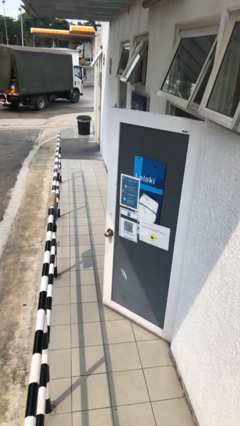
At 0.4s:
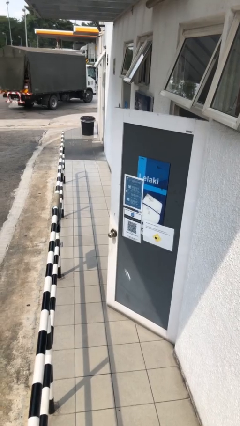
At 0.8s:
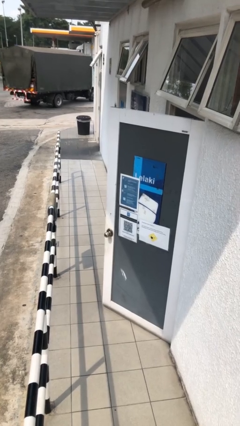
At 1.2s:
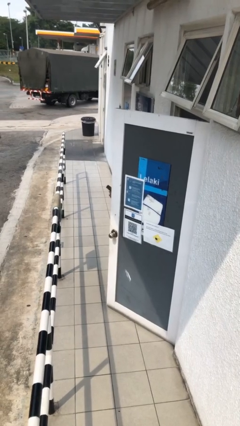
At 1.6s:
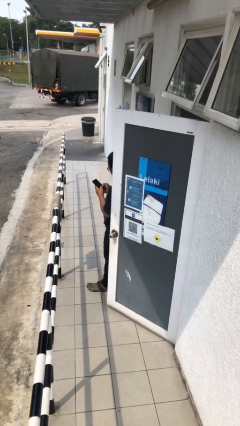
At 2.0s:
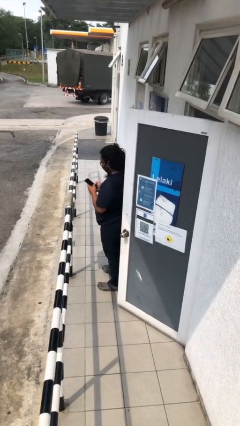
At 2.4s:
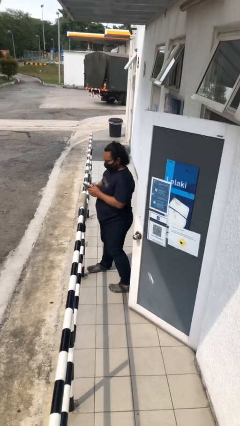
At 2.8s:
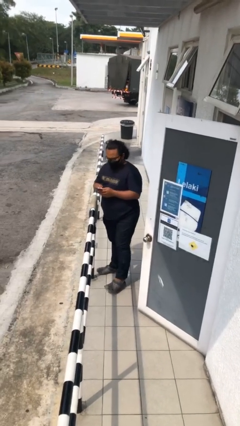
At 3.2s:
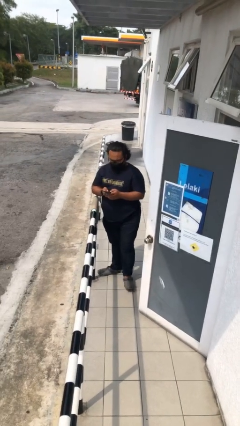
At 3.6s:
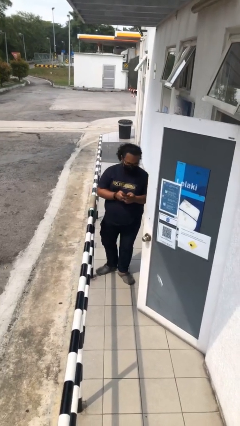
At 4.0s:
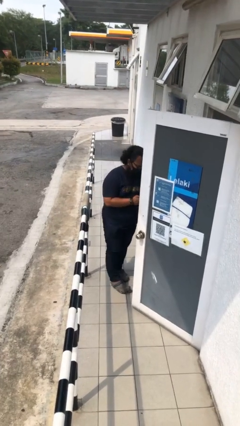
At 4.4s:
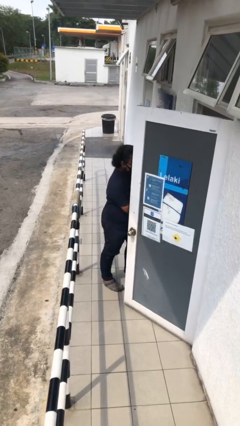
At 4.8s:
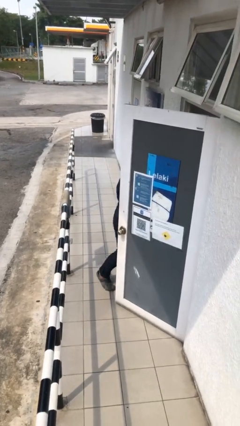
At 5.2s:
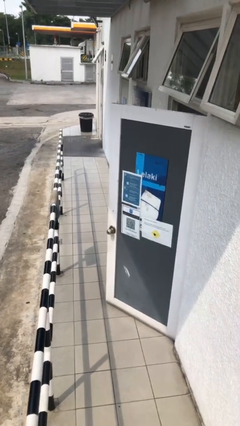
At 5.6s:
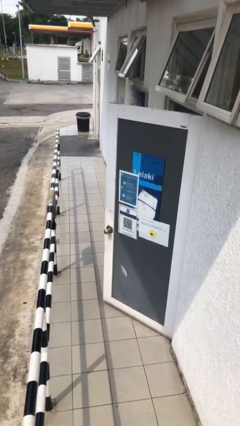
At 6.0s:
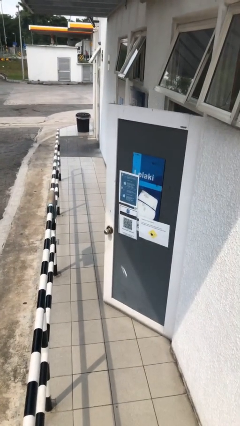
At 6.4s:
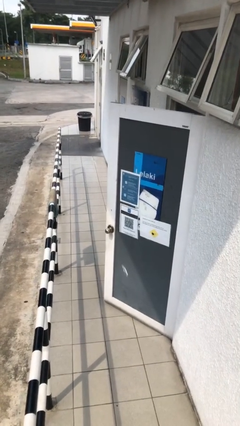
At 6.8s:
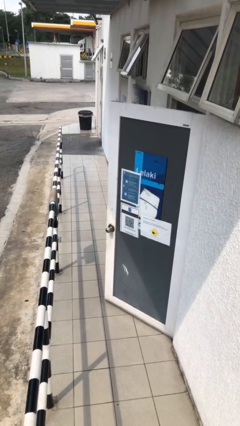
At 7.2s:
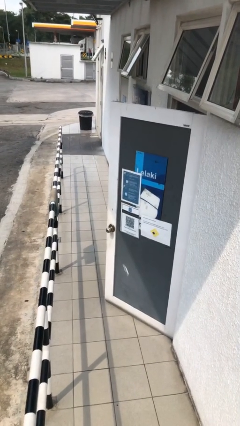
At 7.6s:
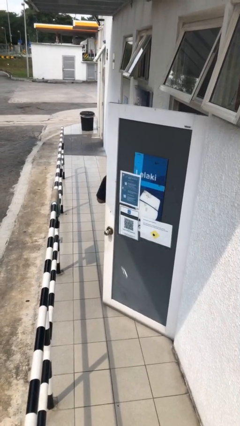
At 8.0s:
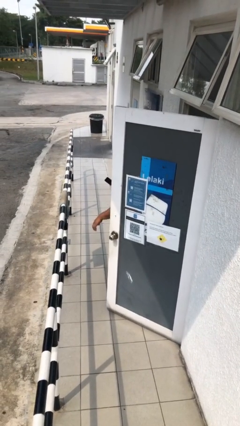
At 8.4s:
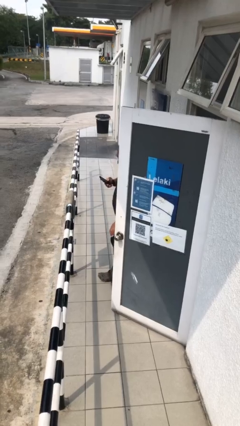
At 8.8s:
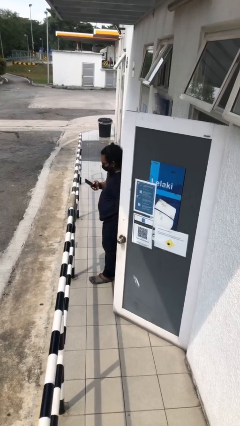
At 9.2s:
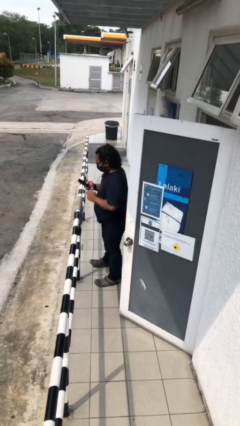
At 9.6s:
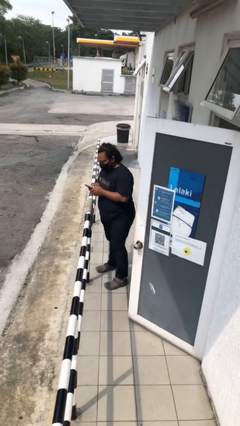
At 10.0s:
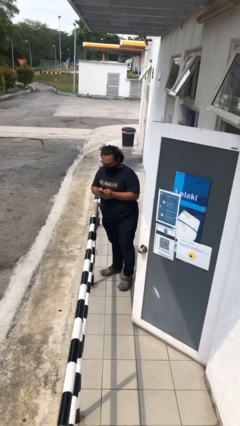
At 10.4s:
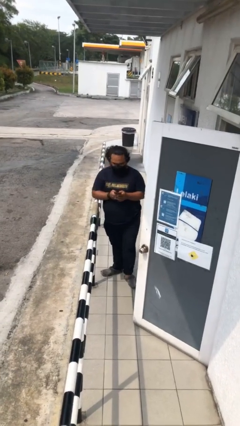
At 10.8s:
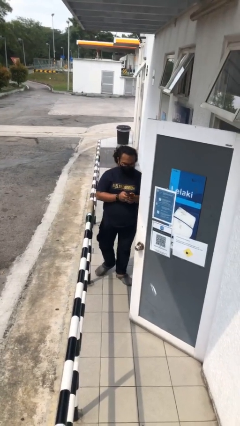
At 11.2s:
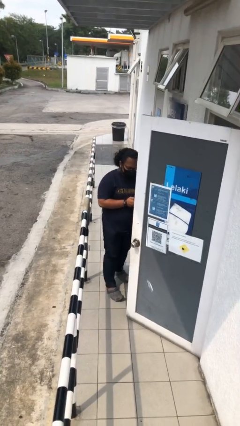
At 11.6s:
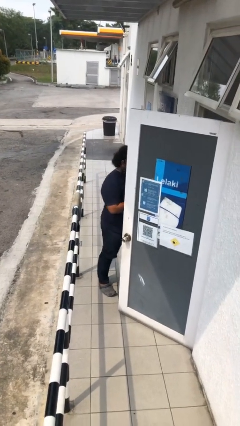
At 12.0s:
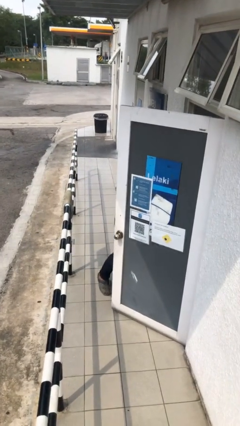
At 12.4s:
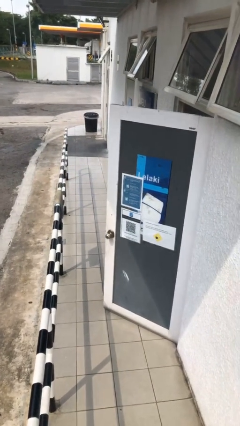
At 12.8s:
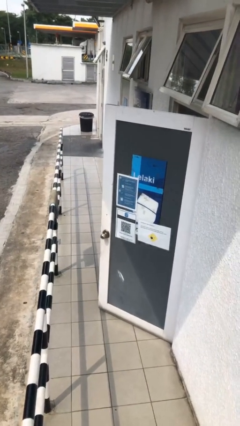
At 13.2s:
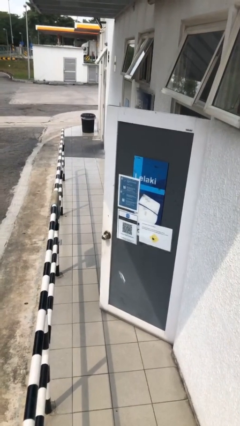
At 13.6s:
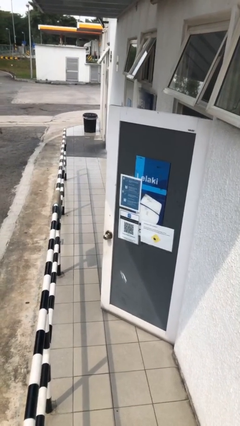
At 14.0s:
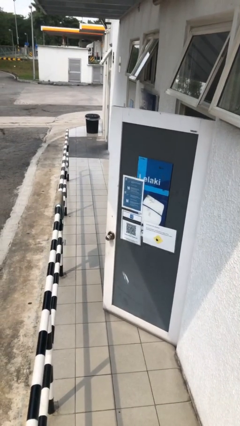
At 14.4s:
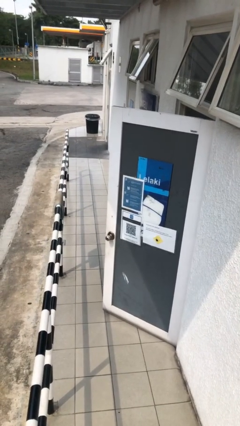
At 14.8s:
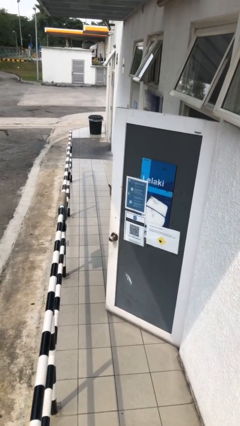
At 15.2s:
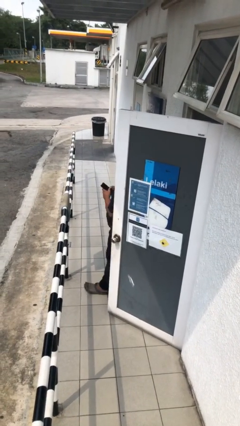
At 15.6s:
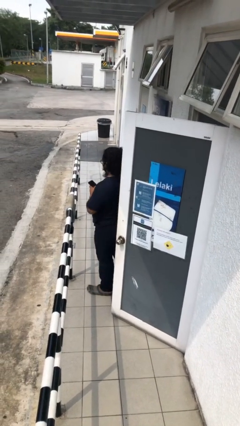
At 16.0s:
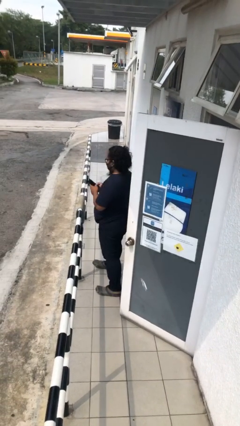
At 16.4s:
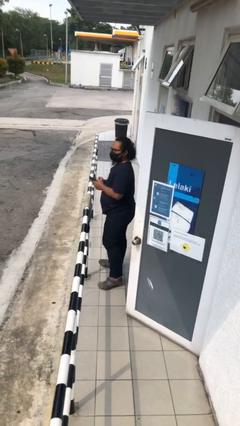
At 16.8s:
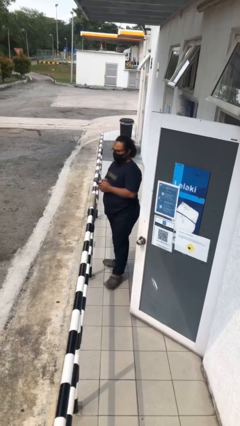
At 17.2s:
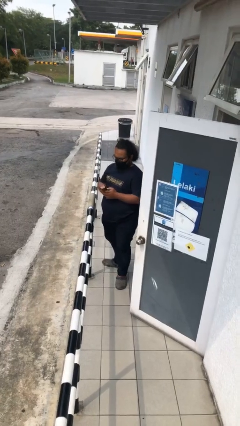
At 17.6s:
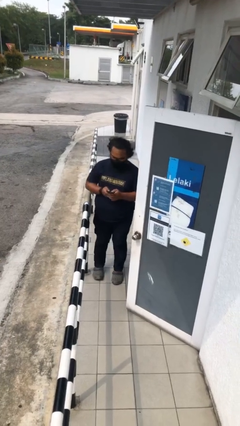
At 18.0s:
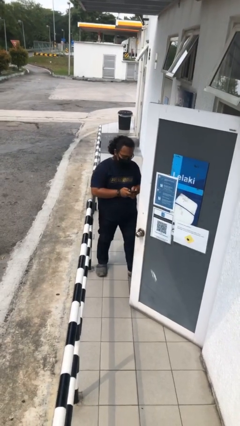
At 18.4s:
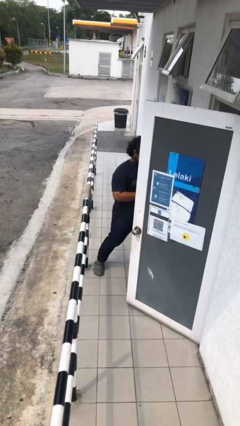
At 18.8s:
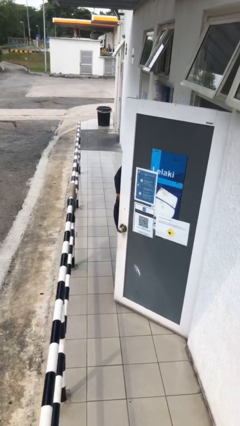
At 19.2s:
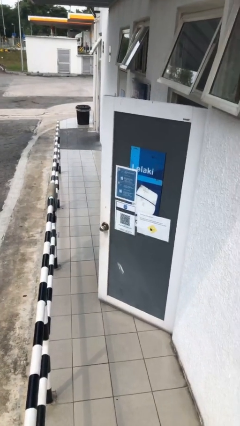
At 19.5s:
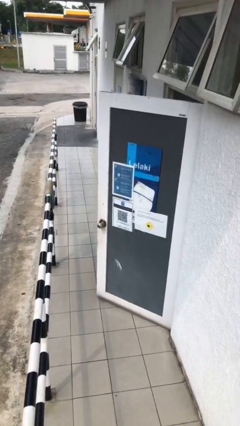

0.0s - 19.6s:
person texts on phone

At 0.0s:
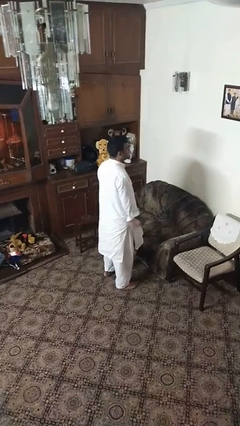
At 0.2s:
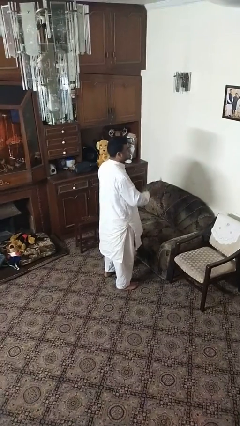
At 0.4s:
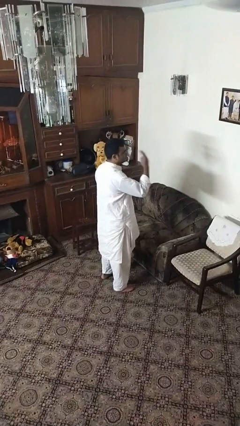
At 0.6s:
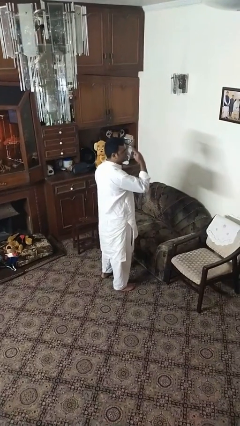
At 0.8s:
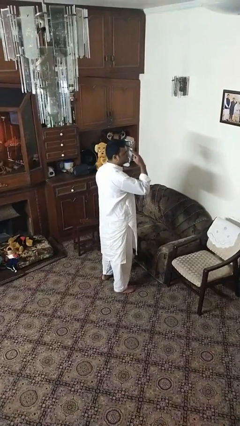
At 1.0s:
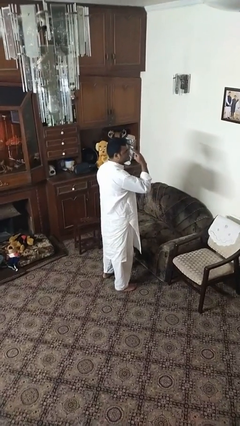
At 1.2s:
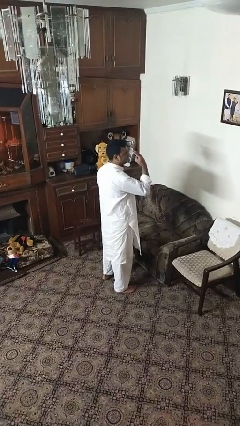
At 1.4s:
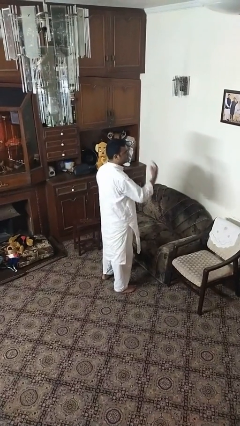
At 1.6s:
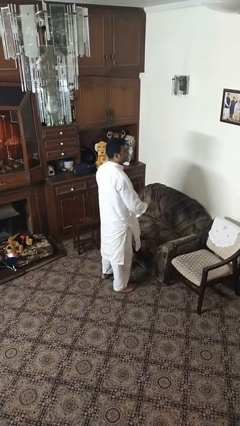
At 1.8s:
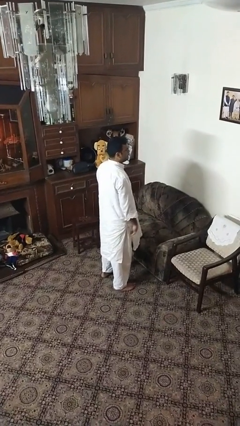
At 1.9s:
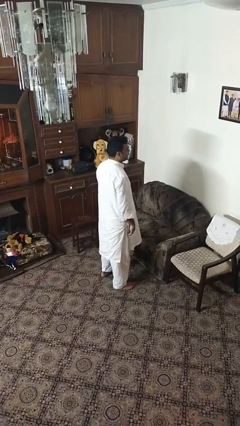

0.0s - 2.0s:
person gestures watch closely

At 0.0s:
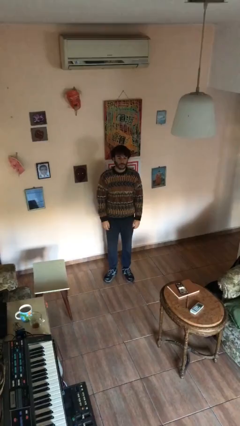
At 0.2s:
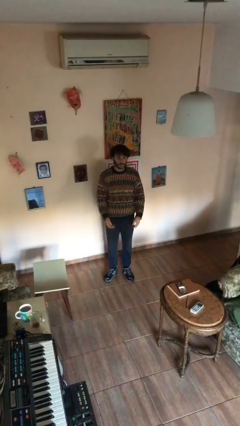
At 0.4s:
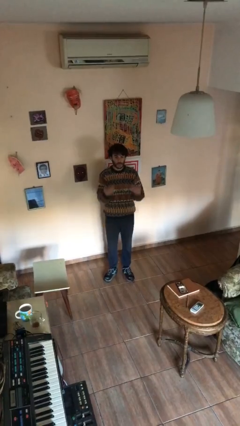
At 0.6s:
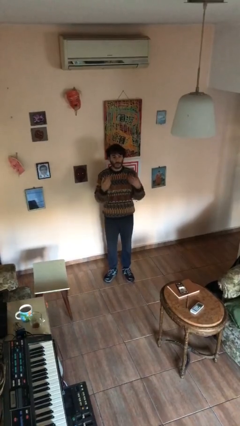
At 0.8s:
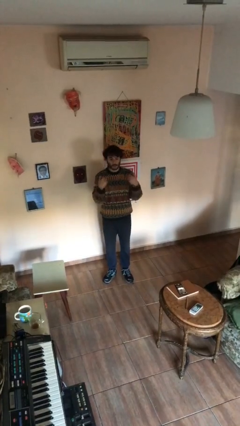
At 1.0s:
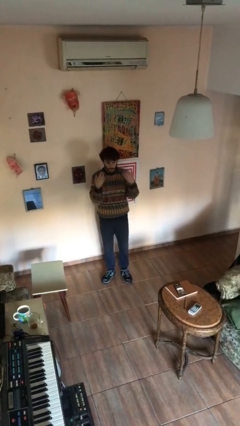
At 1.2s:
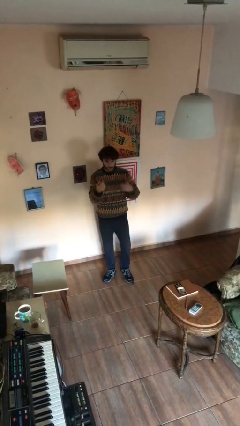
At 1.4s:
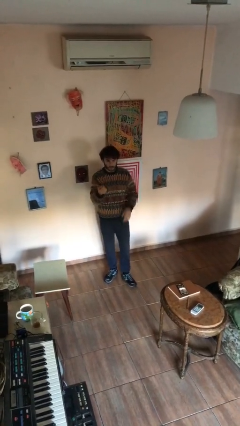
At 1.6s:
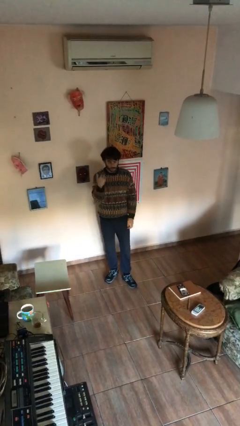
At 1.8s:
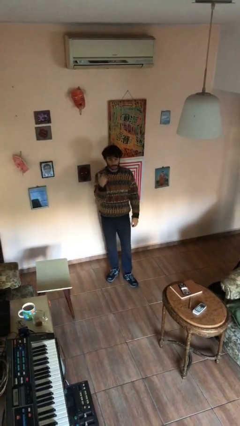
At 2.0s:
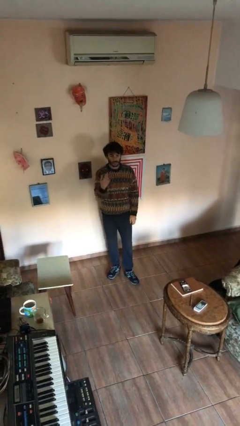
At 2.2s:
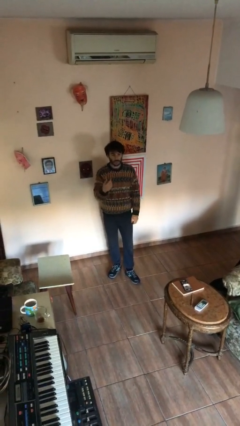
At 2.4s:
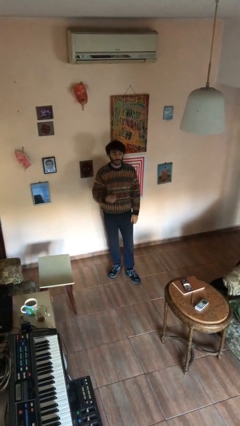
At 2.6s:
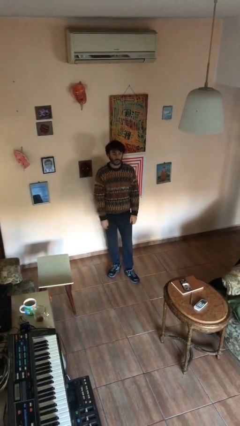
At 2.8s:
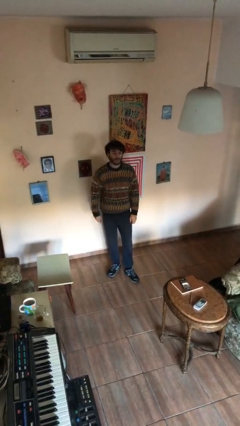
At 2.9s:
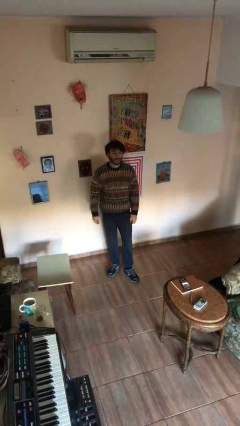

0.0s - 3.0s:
person gestures come here

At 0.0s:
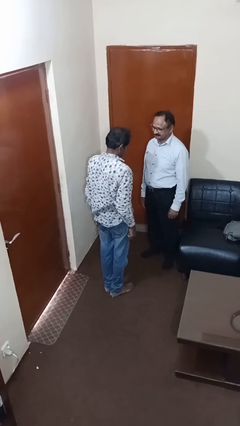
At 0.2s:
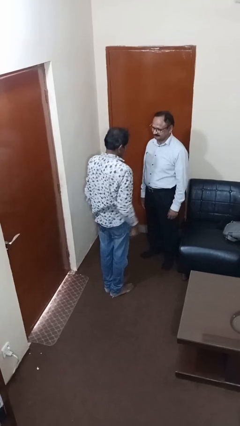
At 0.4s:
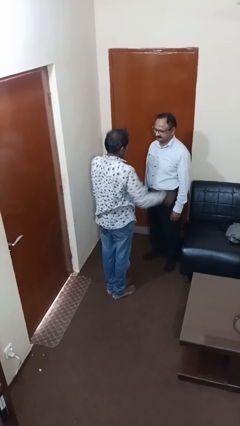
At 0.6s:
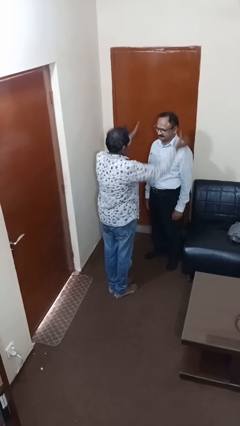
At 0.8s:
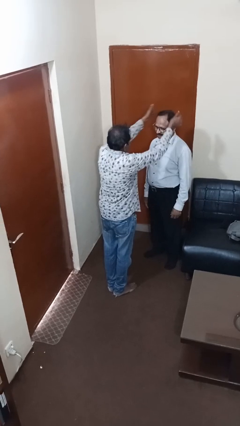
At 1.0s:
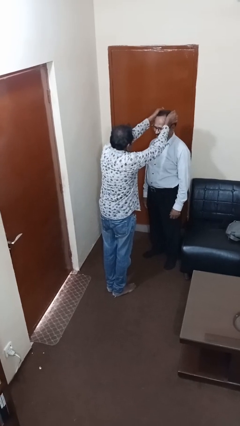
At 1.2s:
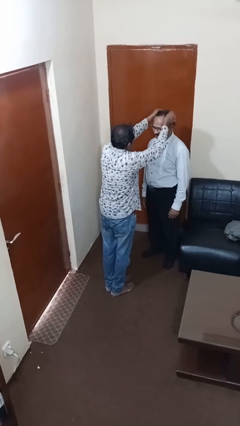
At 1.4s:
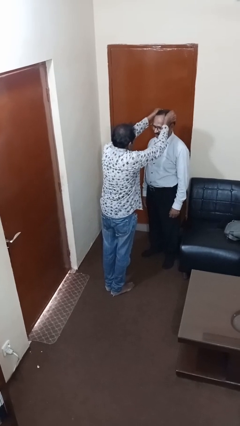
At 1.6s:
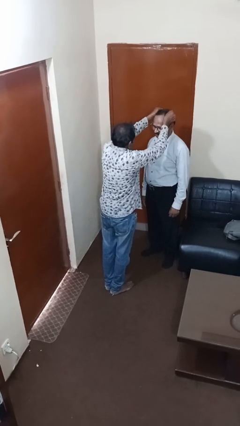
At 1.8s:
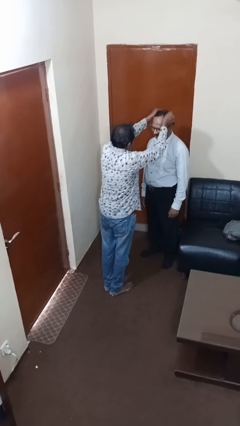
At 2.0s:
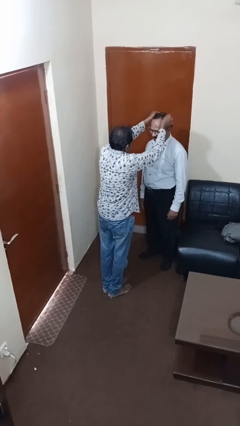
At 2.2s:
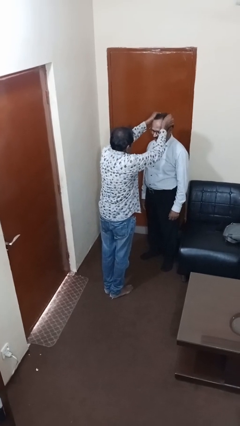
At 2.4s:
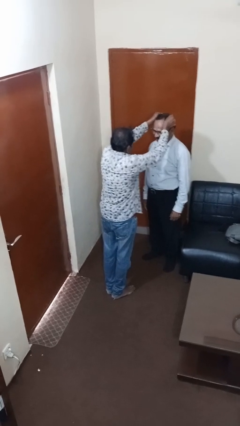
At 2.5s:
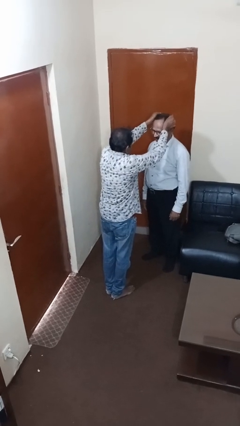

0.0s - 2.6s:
person grabs person by hair
